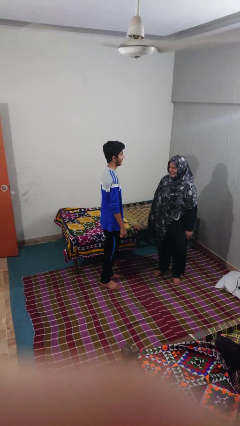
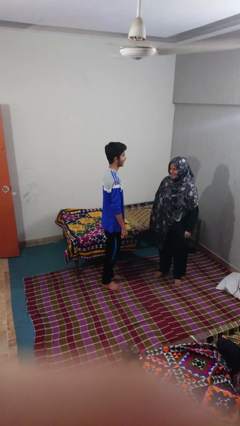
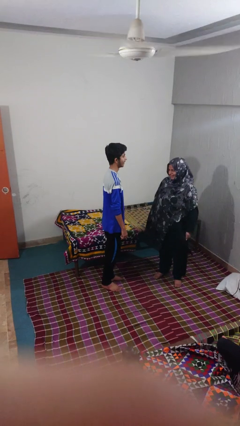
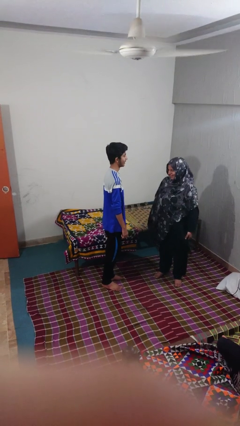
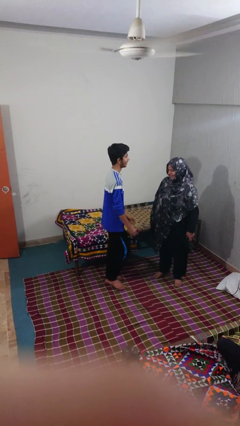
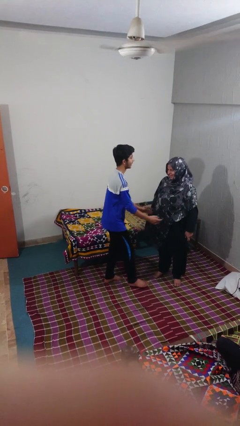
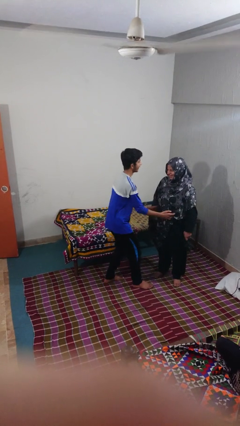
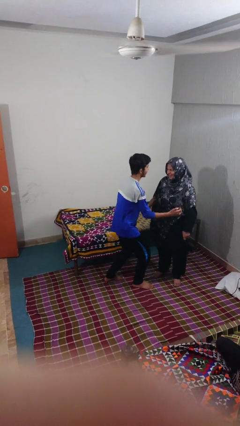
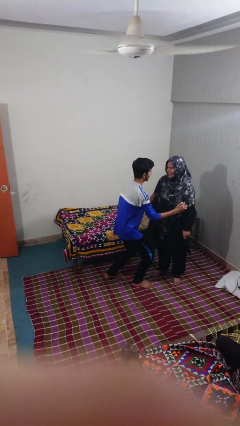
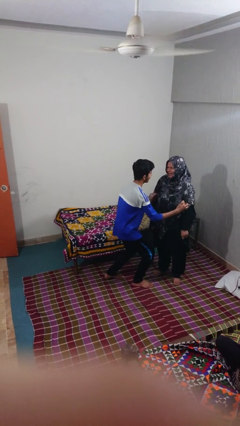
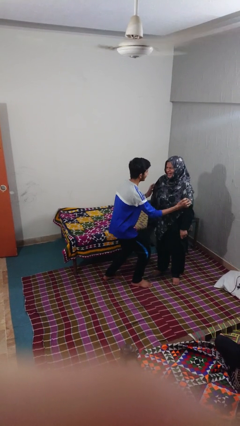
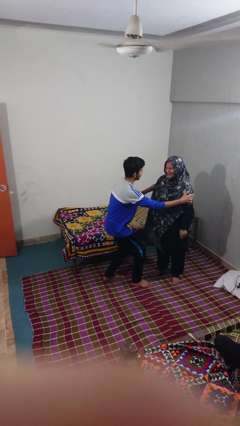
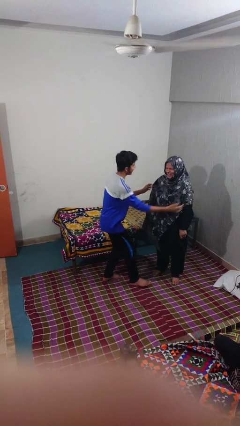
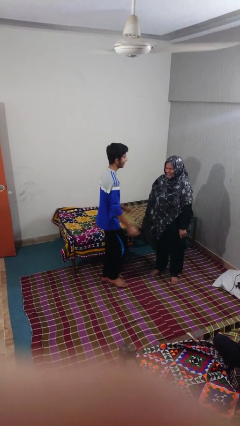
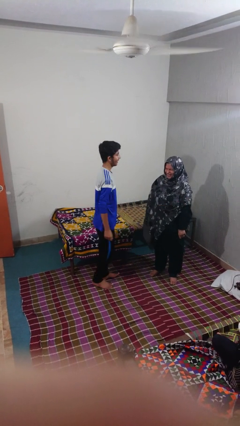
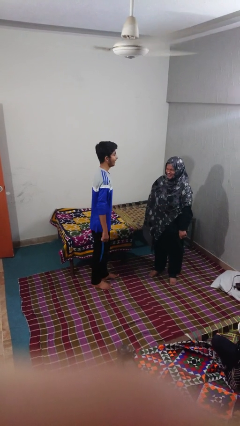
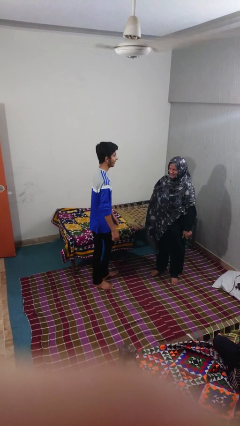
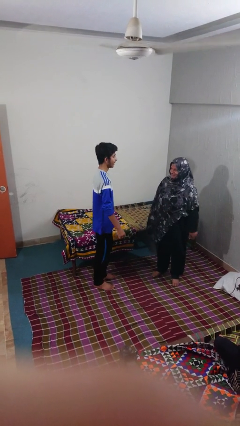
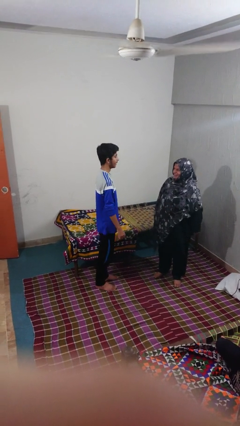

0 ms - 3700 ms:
person tickles person

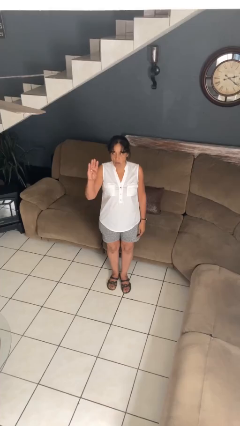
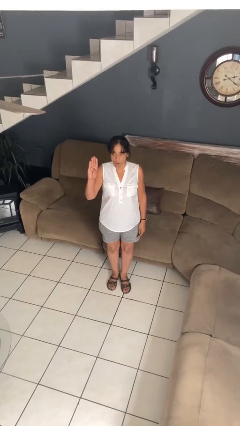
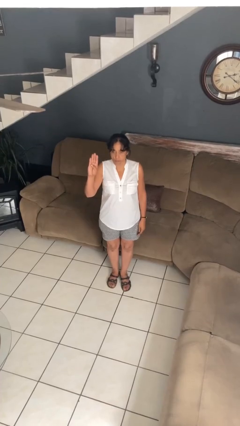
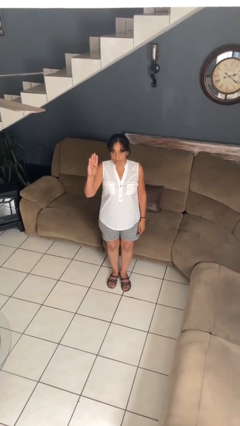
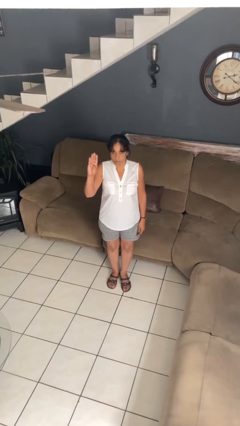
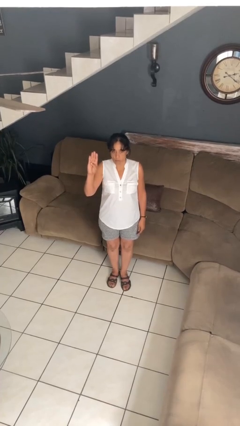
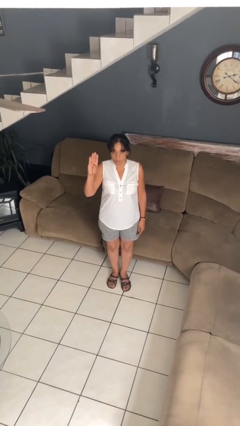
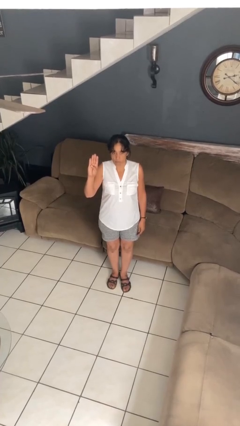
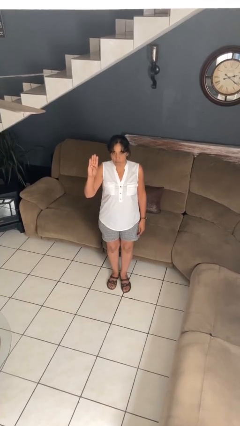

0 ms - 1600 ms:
person gestures number four

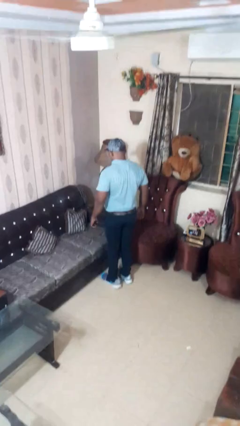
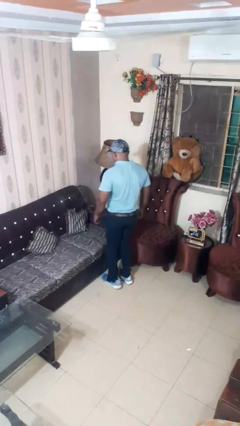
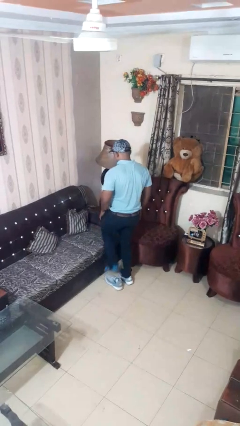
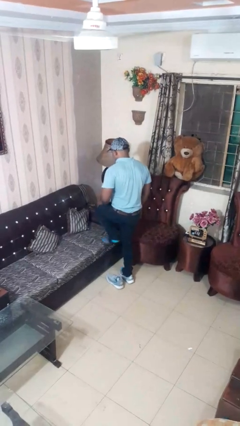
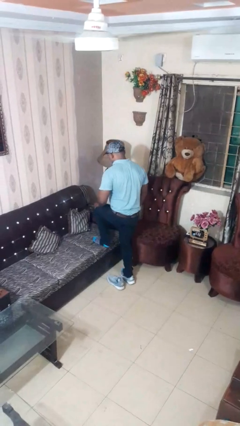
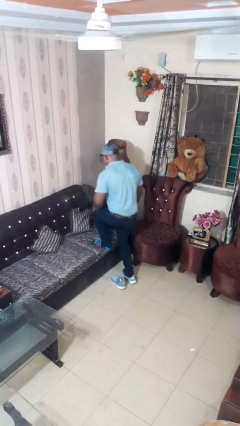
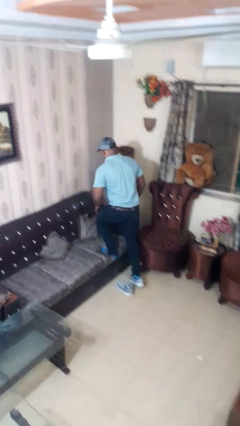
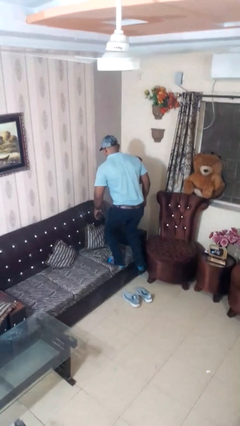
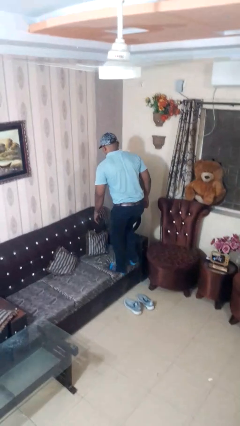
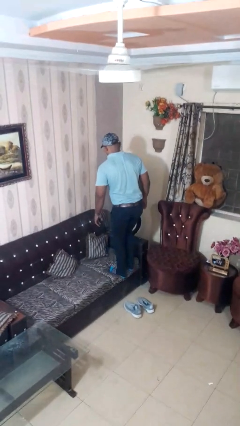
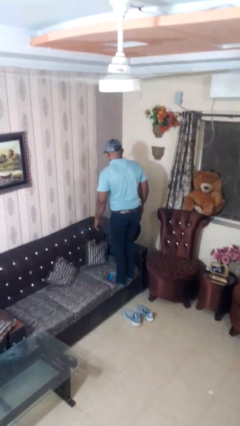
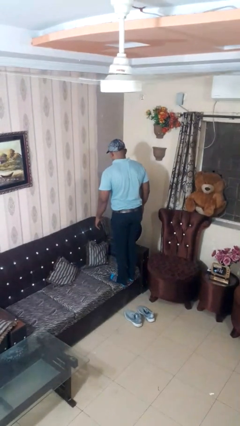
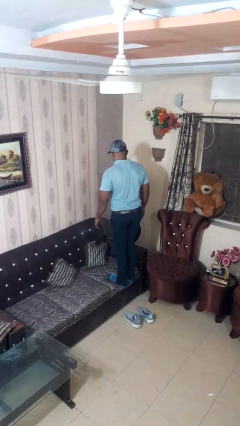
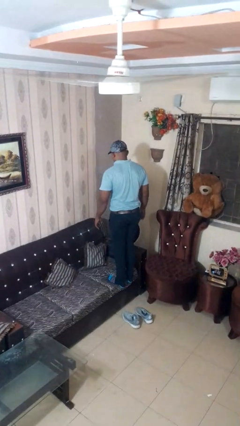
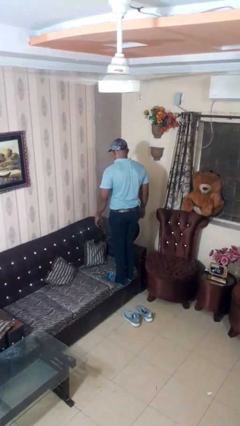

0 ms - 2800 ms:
person climbs on couch

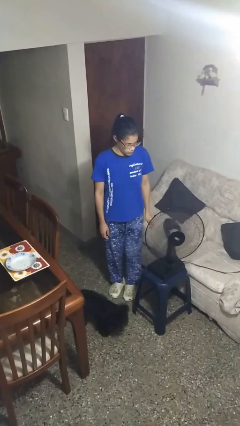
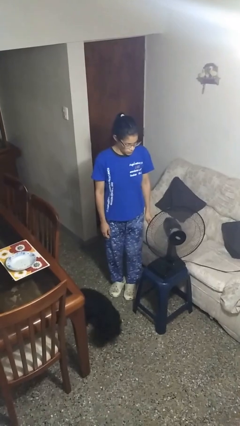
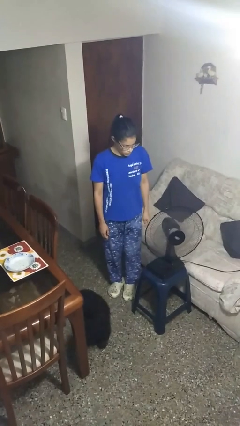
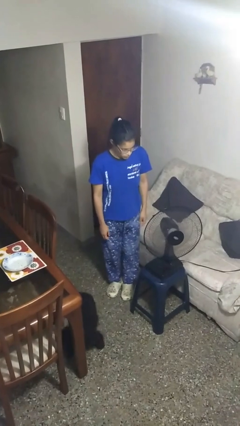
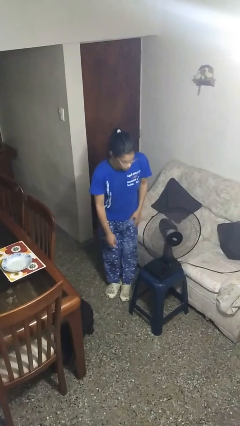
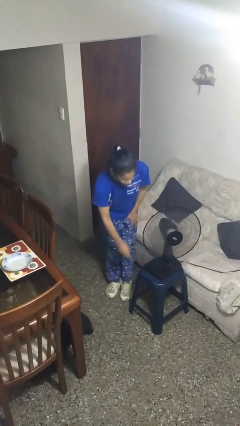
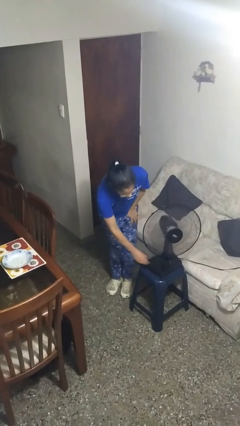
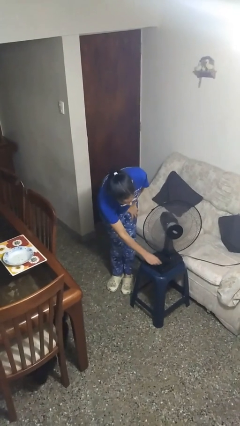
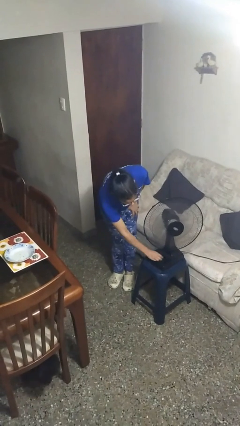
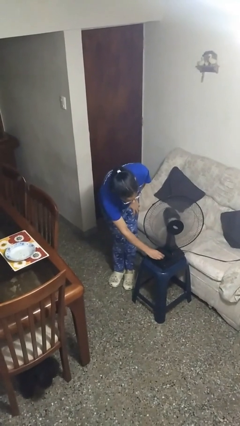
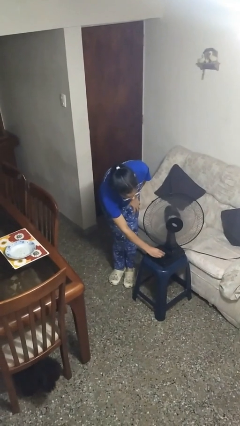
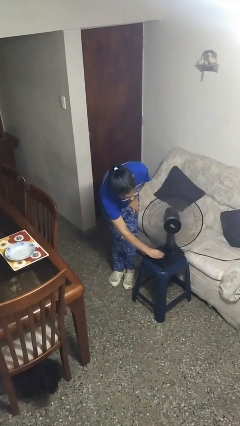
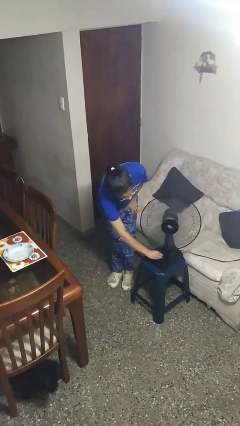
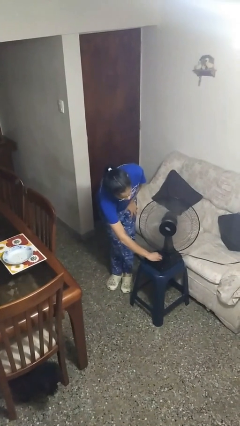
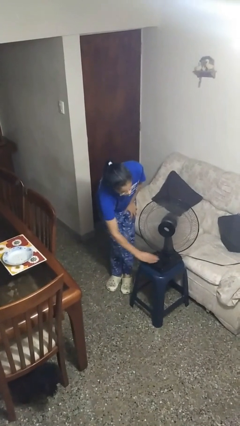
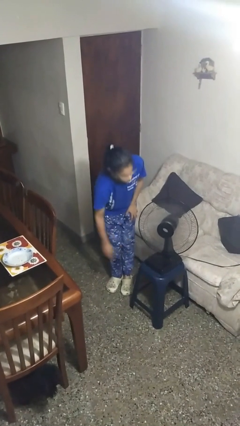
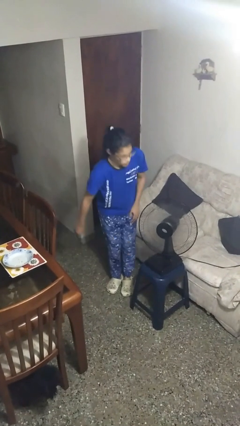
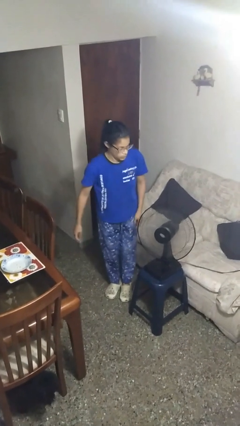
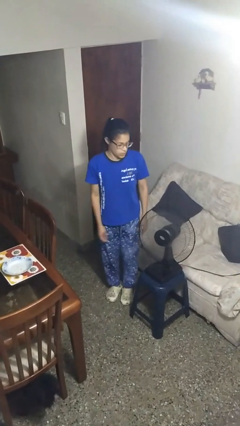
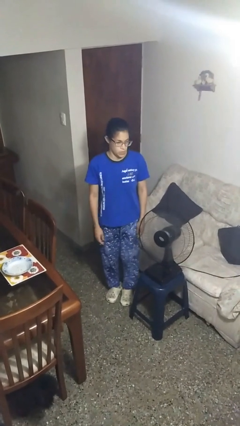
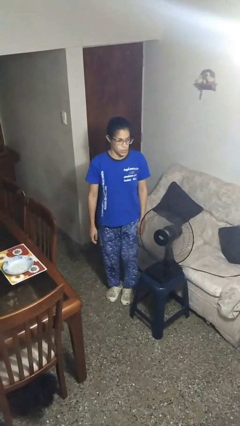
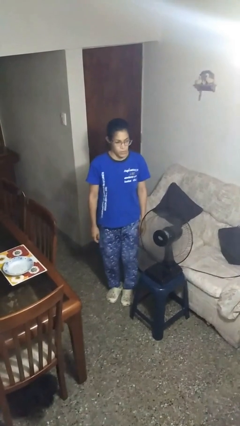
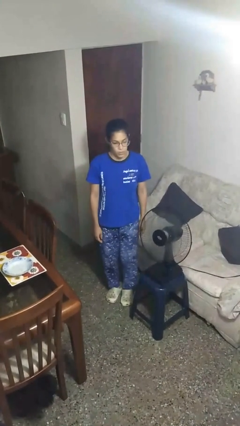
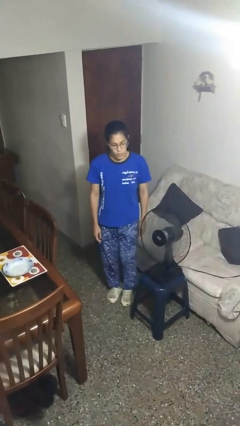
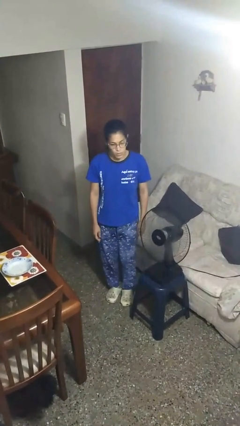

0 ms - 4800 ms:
person turns off fan

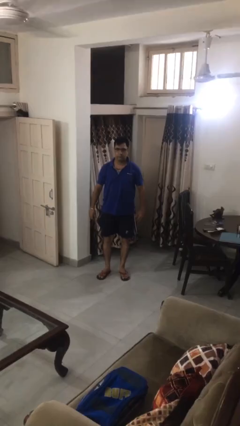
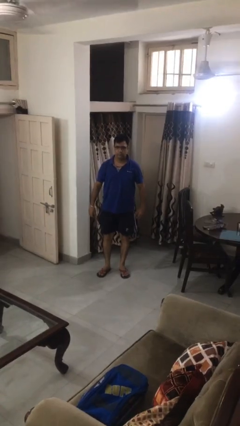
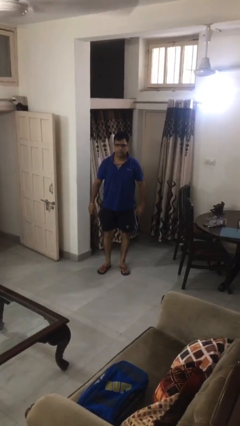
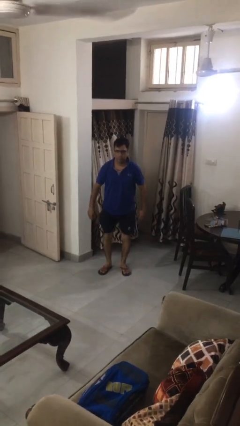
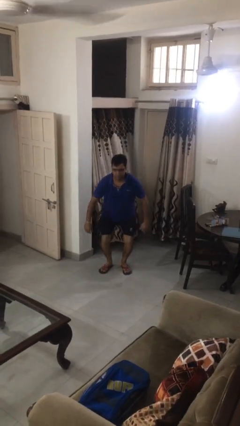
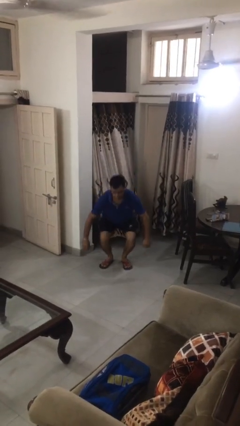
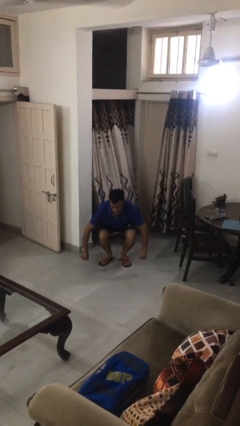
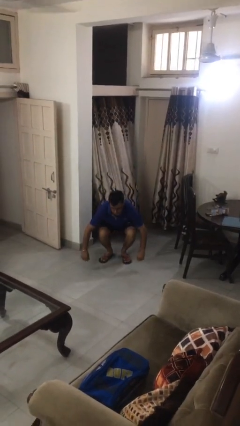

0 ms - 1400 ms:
person squats

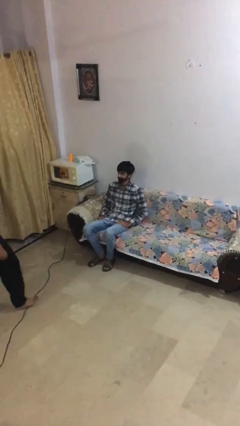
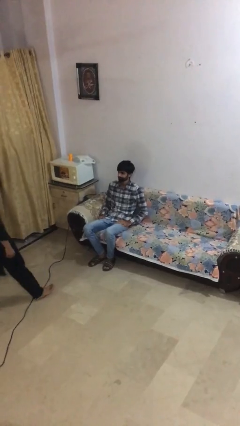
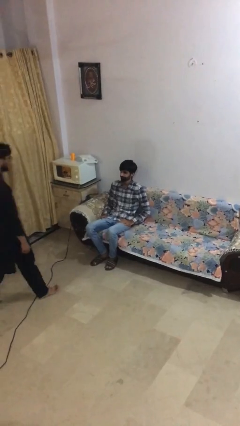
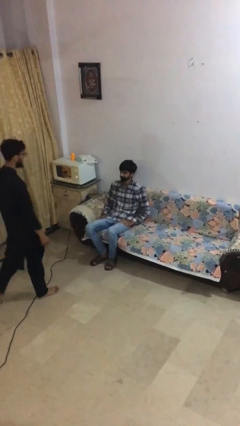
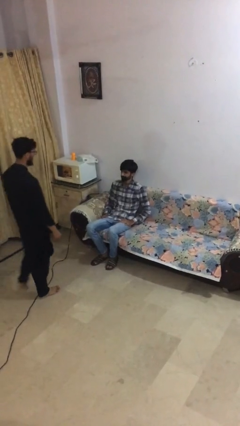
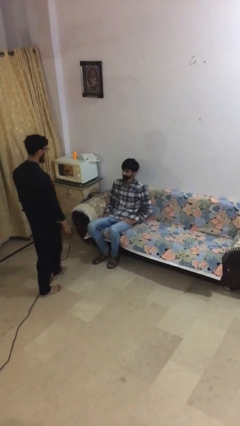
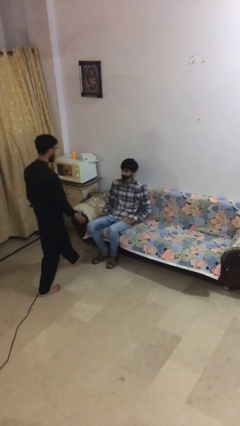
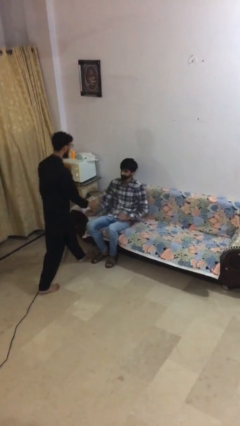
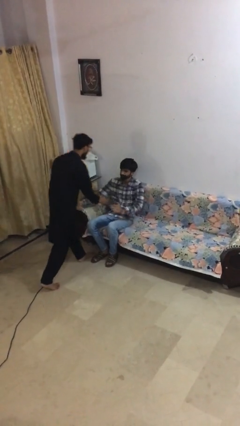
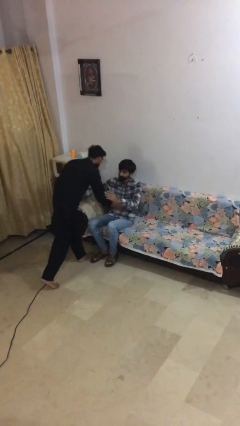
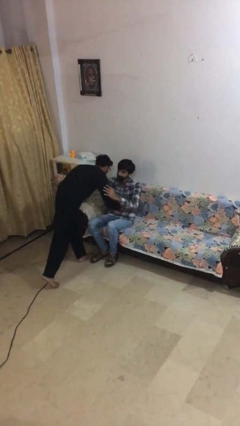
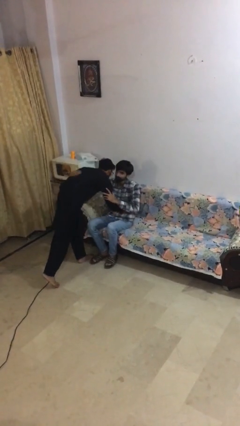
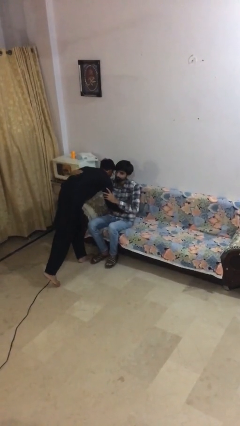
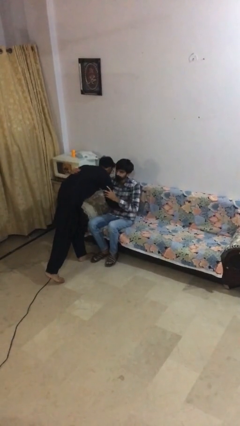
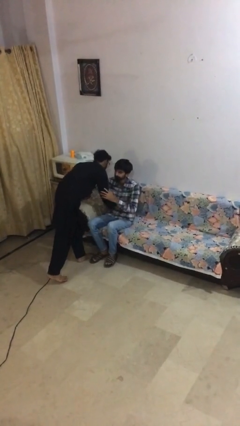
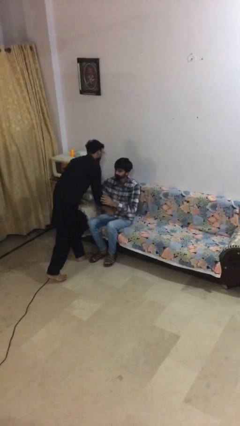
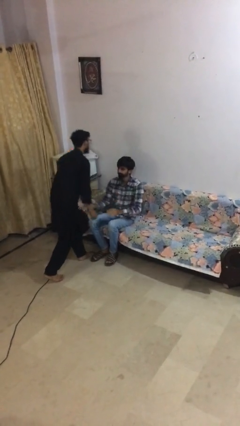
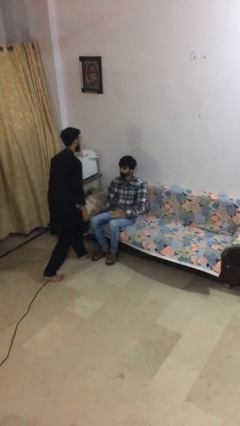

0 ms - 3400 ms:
person embraces person
